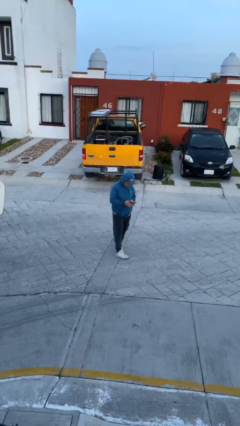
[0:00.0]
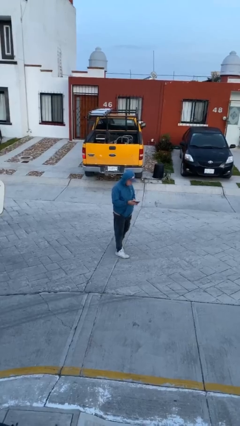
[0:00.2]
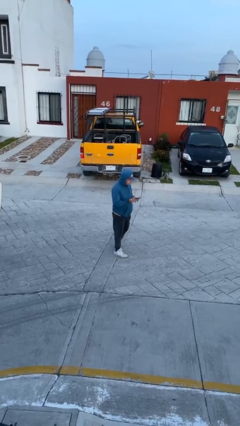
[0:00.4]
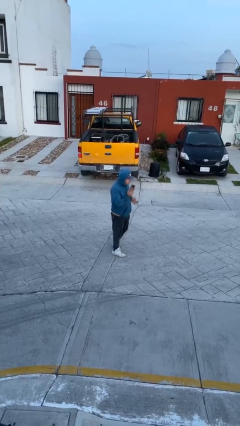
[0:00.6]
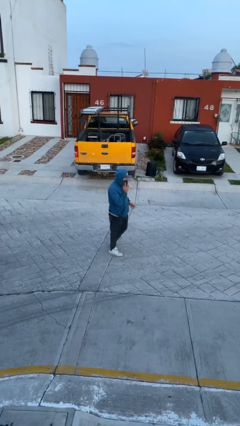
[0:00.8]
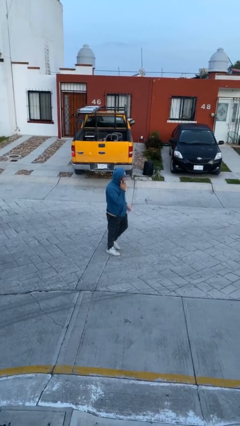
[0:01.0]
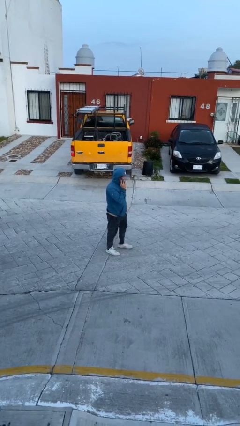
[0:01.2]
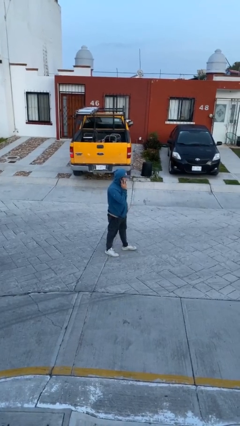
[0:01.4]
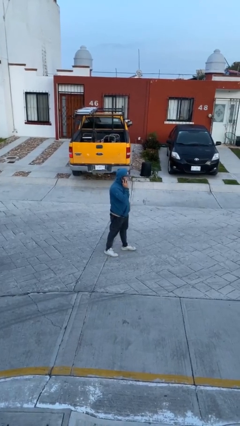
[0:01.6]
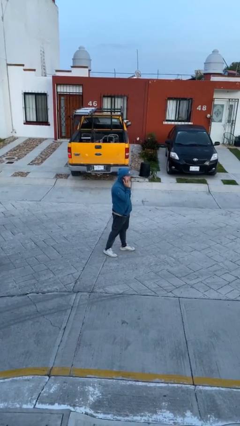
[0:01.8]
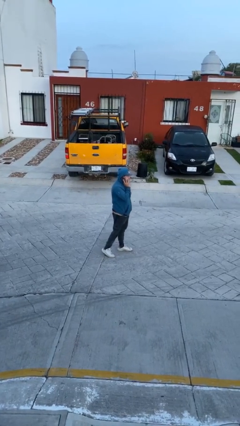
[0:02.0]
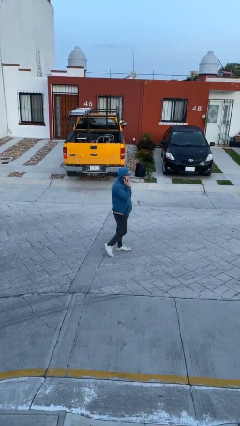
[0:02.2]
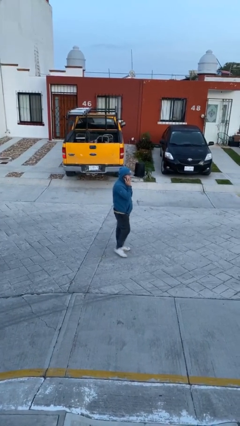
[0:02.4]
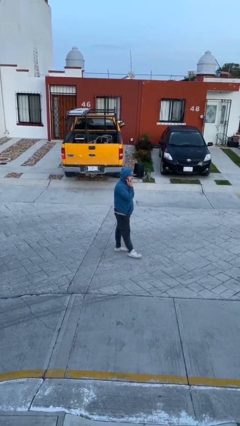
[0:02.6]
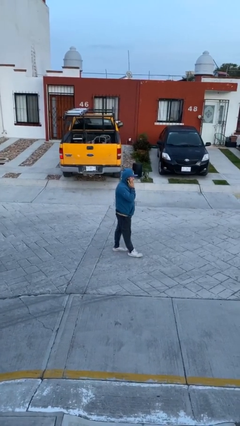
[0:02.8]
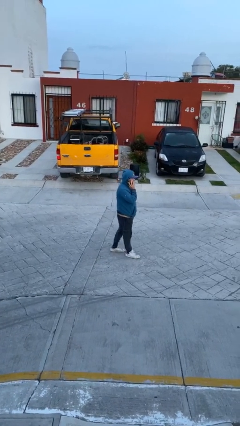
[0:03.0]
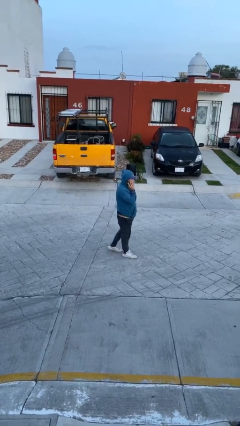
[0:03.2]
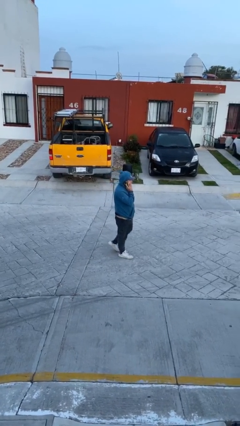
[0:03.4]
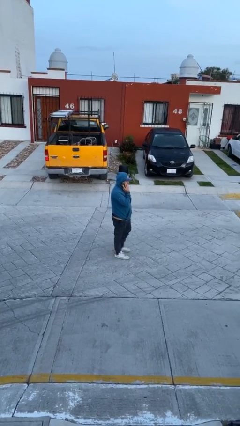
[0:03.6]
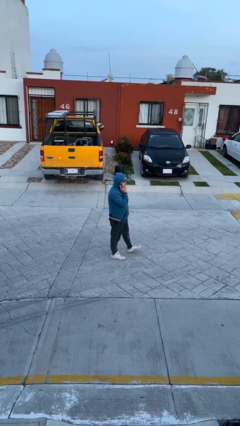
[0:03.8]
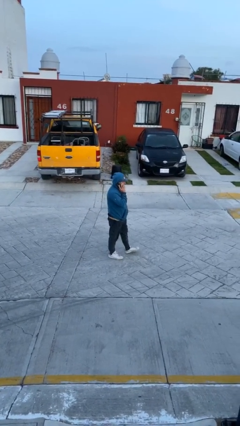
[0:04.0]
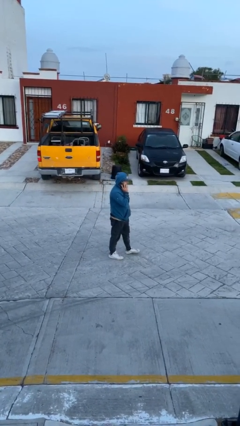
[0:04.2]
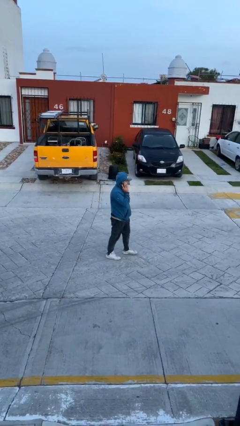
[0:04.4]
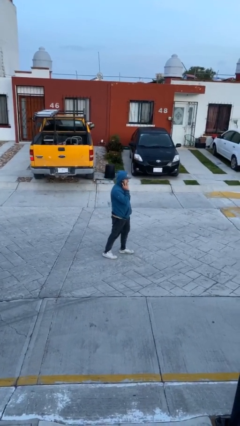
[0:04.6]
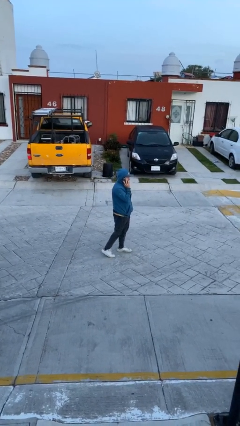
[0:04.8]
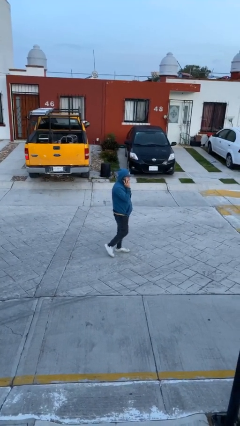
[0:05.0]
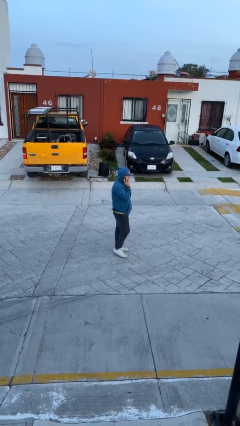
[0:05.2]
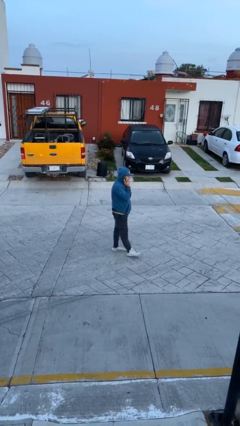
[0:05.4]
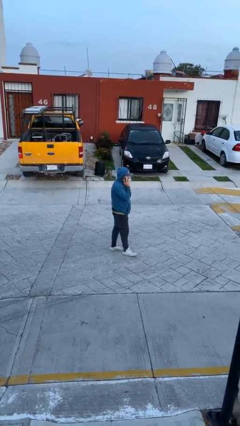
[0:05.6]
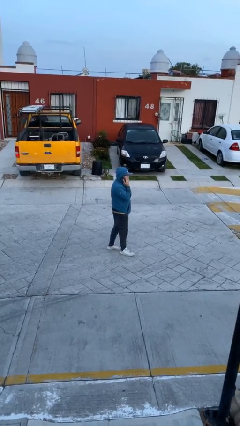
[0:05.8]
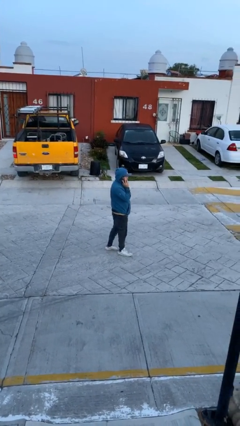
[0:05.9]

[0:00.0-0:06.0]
person talks on phone

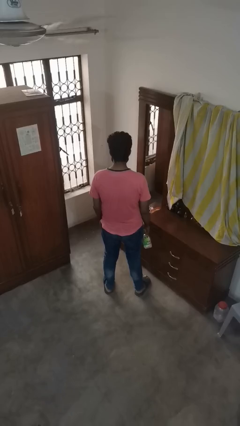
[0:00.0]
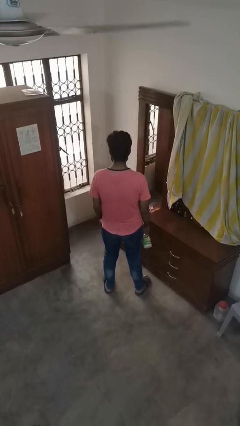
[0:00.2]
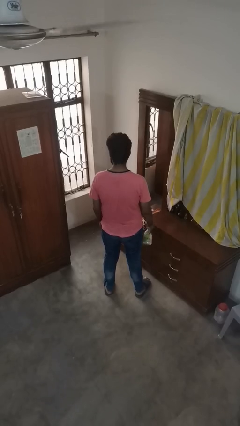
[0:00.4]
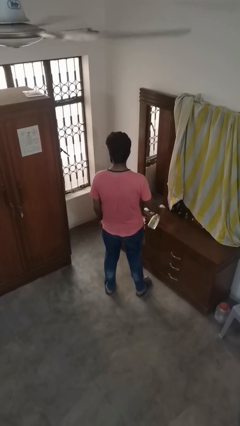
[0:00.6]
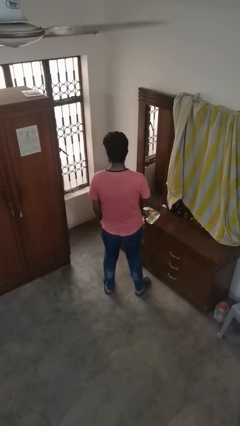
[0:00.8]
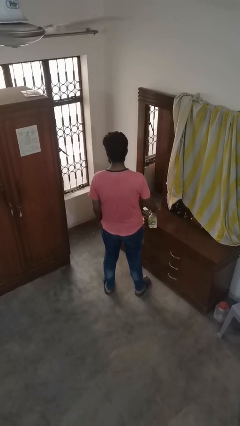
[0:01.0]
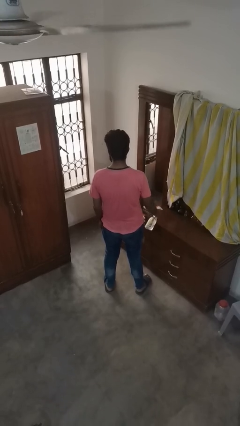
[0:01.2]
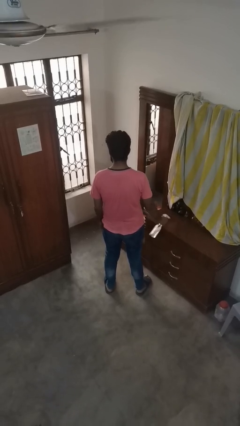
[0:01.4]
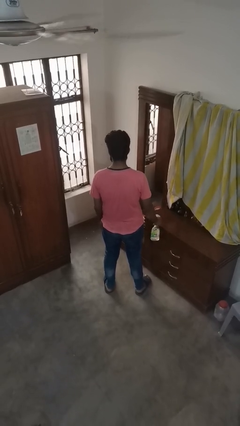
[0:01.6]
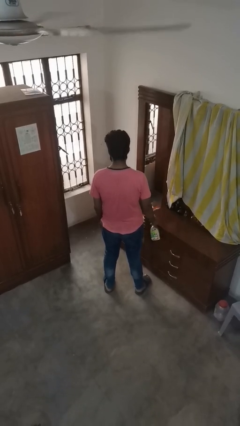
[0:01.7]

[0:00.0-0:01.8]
person sprays from bottle

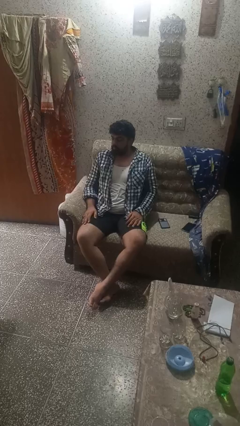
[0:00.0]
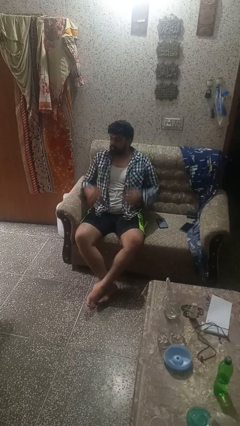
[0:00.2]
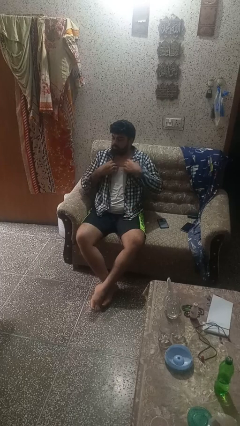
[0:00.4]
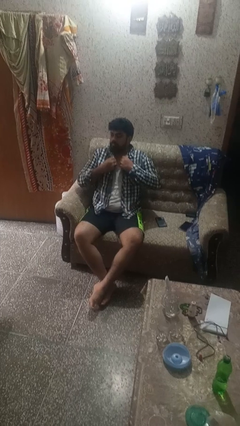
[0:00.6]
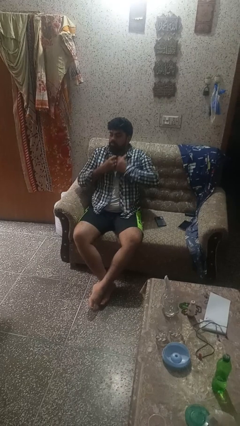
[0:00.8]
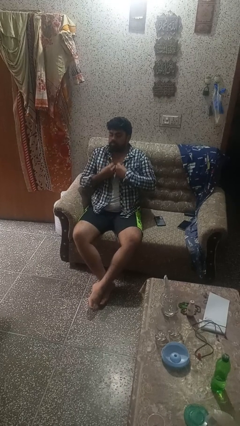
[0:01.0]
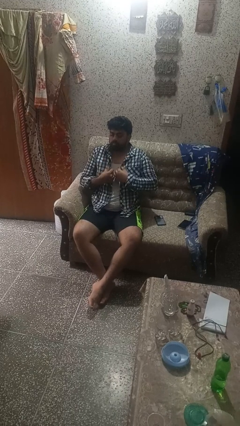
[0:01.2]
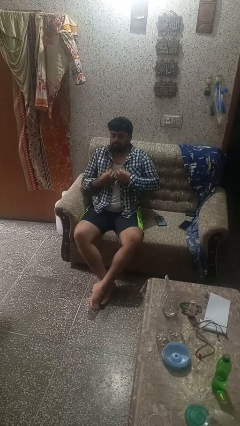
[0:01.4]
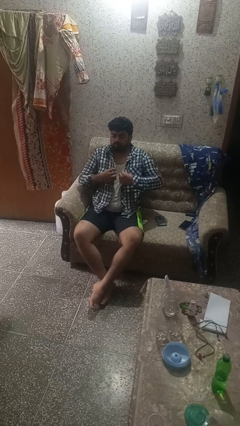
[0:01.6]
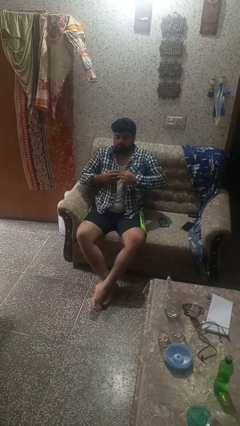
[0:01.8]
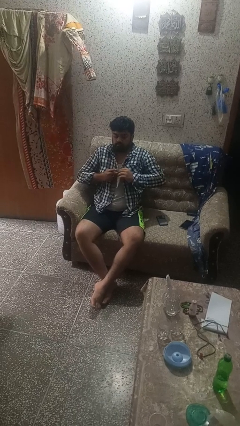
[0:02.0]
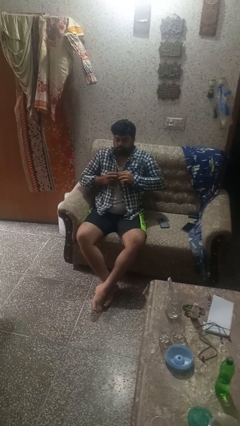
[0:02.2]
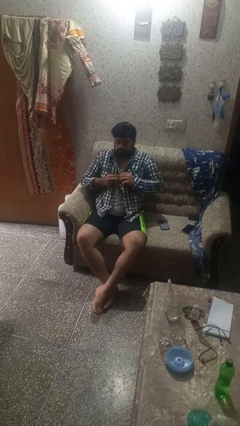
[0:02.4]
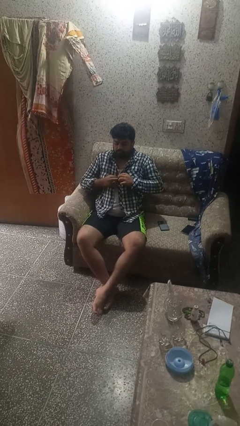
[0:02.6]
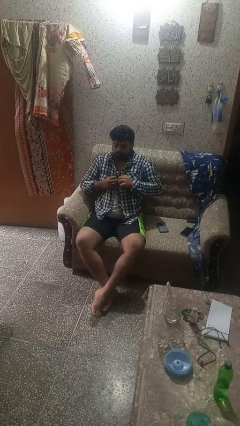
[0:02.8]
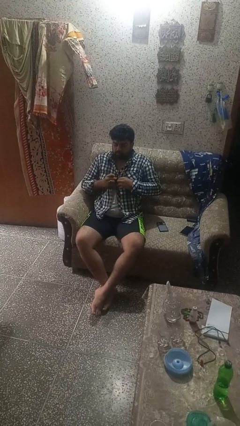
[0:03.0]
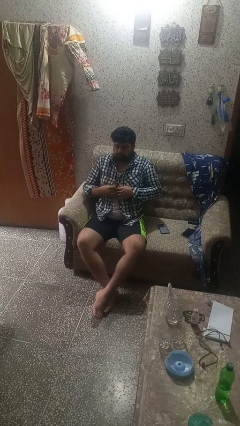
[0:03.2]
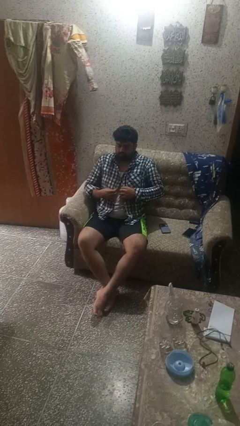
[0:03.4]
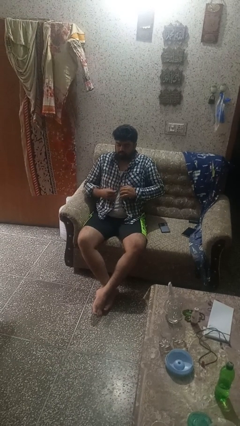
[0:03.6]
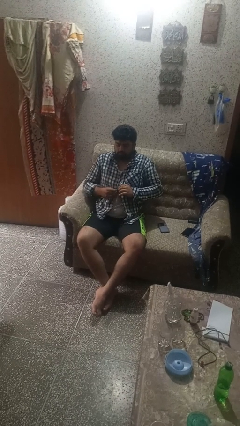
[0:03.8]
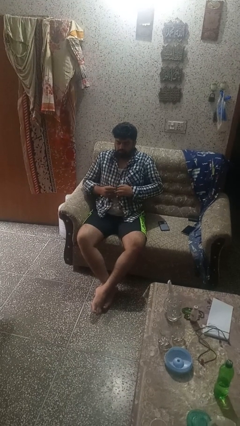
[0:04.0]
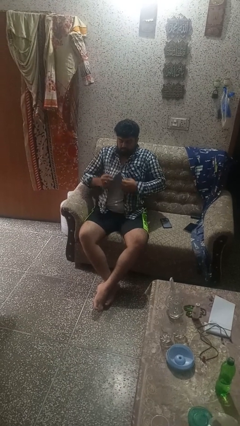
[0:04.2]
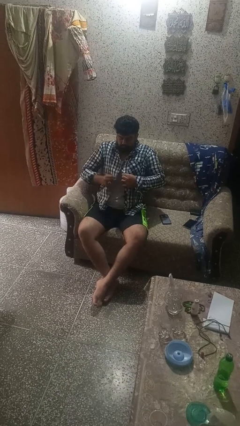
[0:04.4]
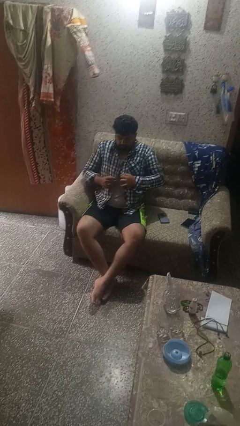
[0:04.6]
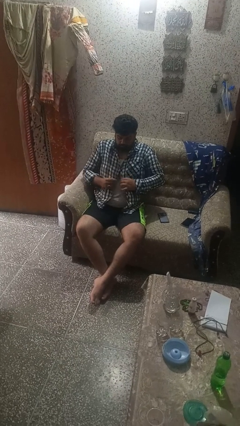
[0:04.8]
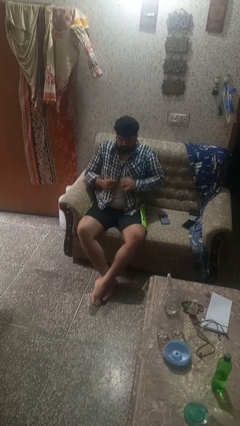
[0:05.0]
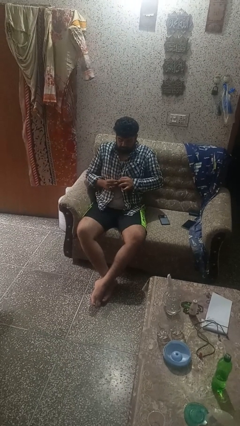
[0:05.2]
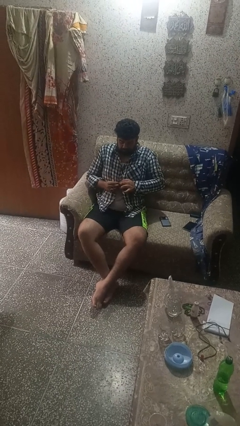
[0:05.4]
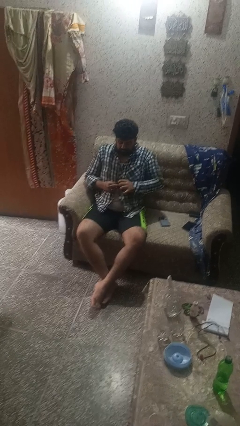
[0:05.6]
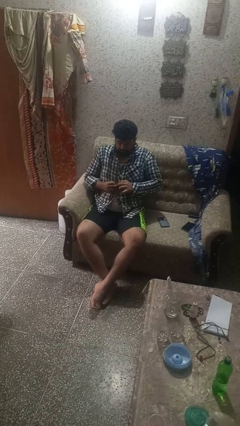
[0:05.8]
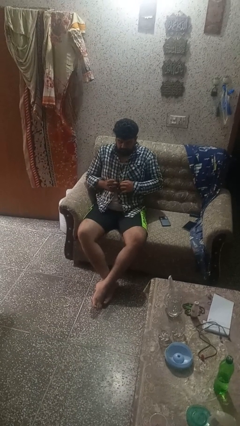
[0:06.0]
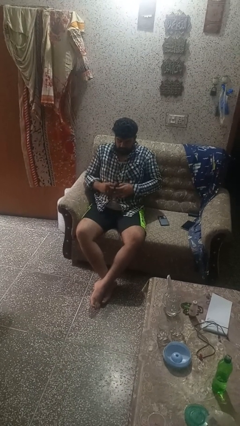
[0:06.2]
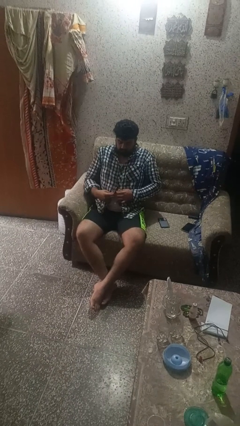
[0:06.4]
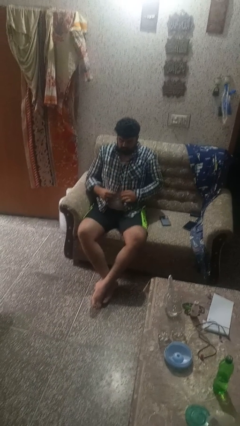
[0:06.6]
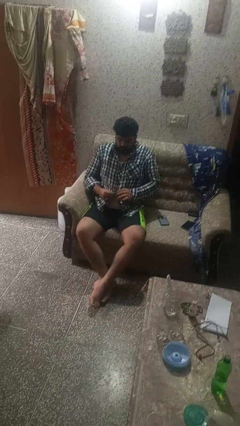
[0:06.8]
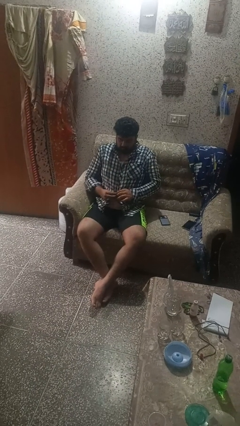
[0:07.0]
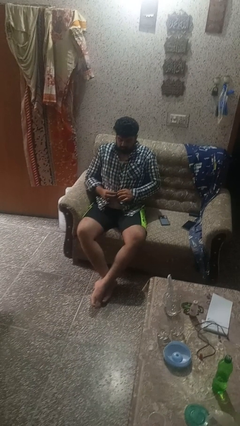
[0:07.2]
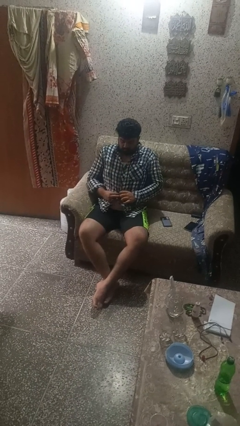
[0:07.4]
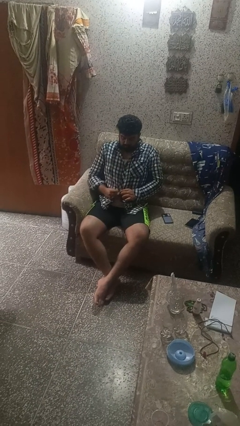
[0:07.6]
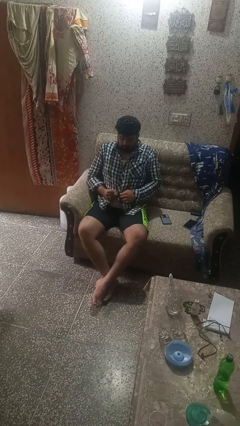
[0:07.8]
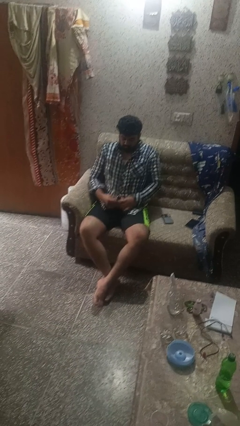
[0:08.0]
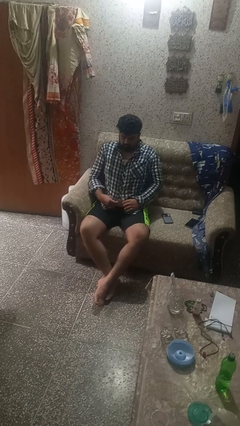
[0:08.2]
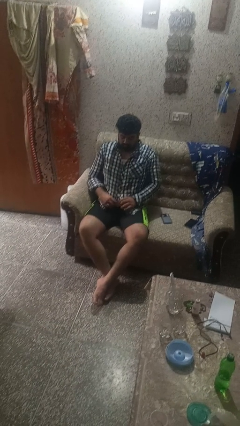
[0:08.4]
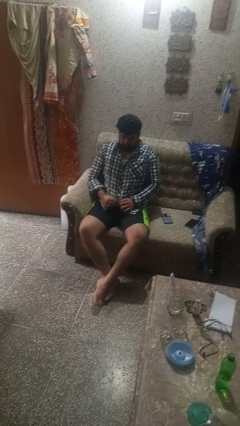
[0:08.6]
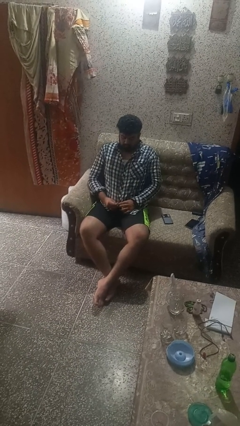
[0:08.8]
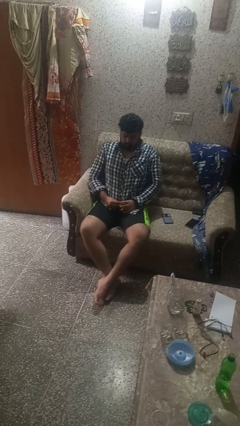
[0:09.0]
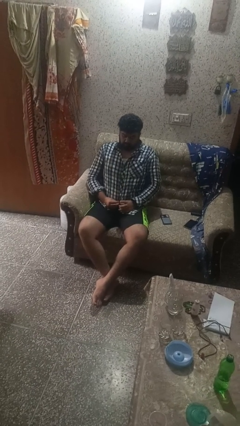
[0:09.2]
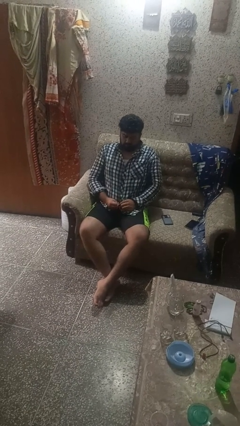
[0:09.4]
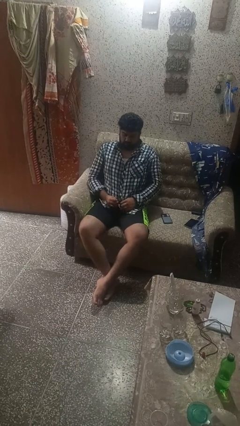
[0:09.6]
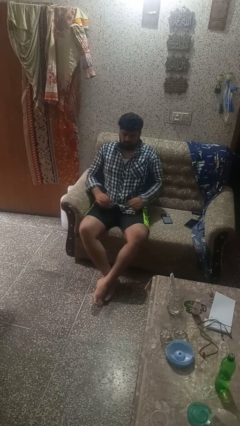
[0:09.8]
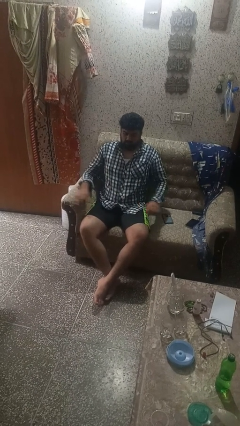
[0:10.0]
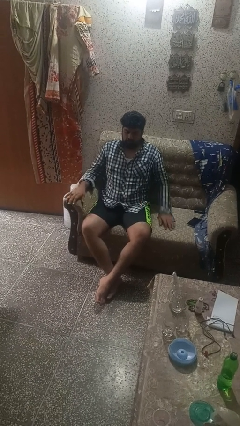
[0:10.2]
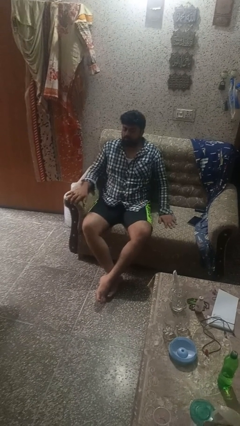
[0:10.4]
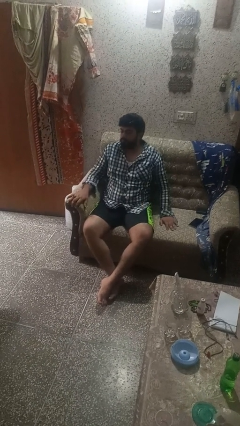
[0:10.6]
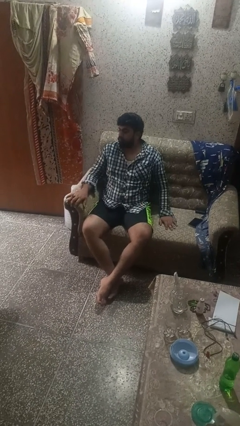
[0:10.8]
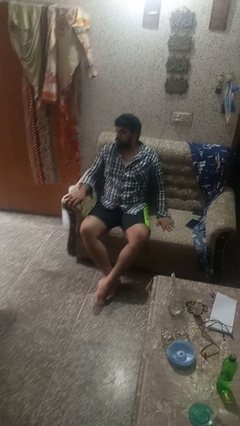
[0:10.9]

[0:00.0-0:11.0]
person buttons shirt
